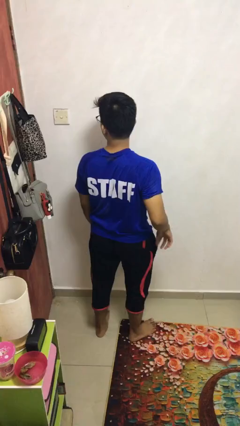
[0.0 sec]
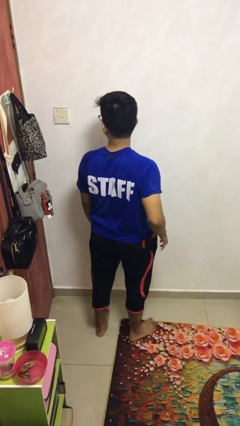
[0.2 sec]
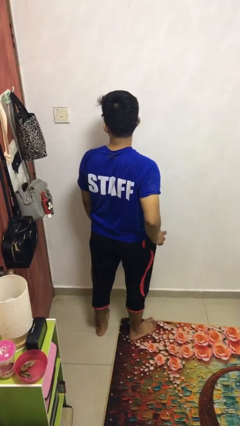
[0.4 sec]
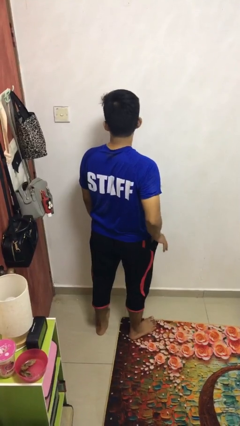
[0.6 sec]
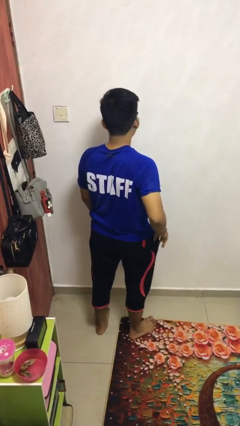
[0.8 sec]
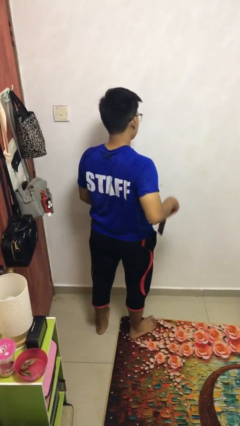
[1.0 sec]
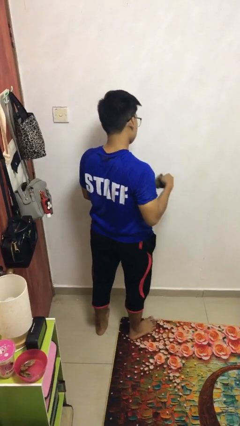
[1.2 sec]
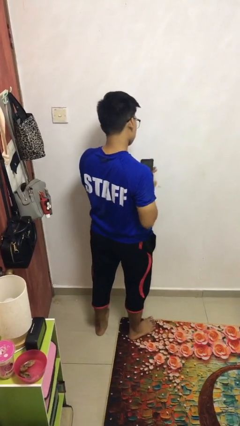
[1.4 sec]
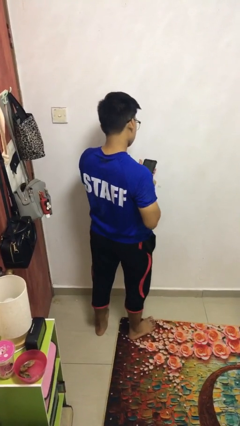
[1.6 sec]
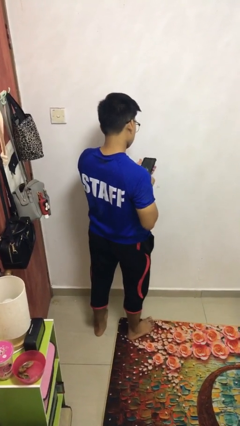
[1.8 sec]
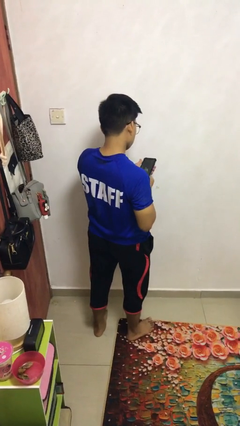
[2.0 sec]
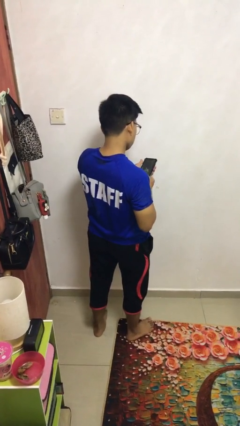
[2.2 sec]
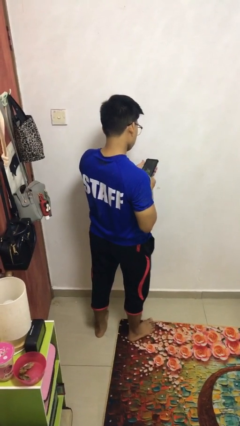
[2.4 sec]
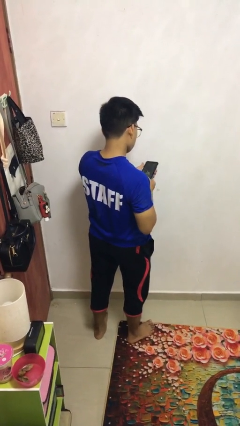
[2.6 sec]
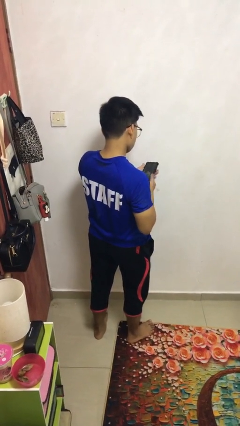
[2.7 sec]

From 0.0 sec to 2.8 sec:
person takes phone from pocket

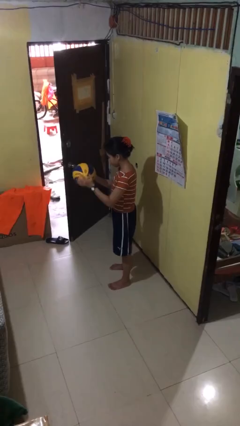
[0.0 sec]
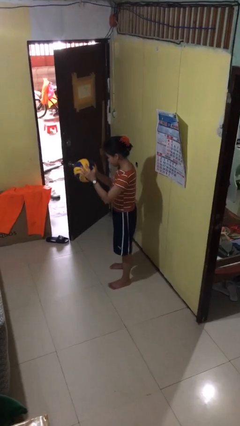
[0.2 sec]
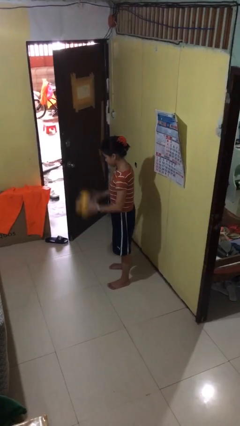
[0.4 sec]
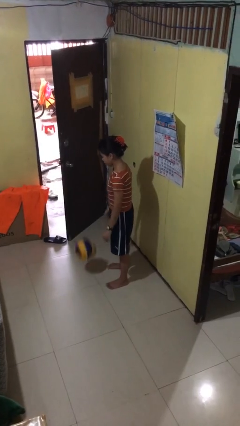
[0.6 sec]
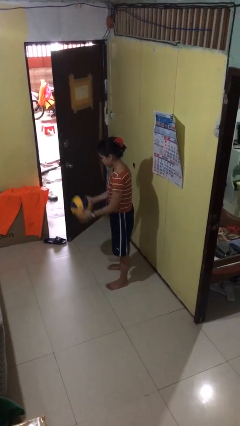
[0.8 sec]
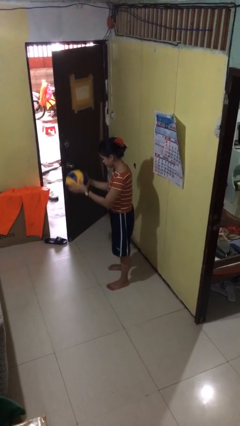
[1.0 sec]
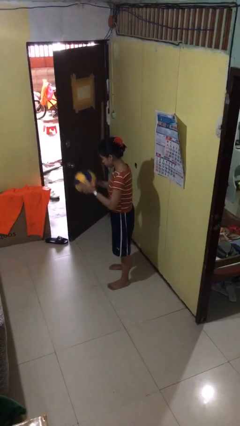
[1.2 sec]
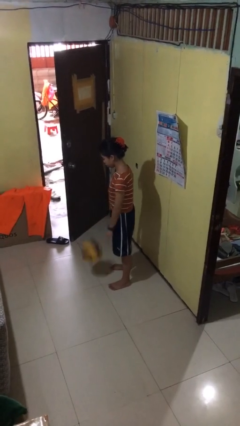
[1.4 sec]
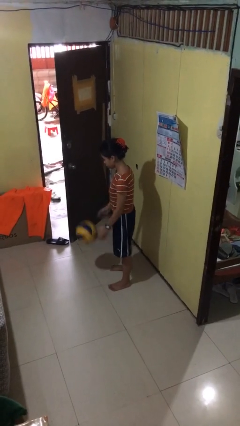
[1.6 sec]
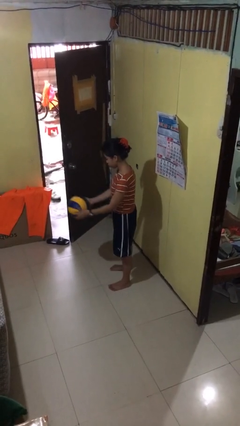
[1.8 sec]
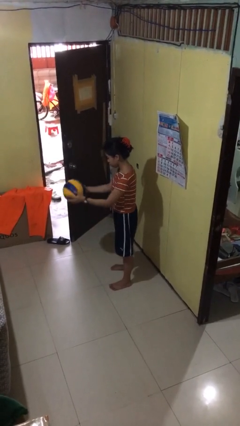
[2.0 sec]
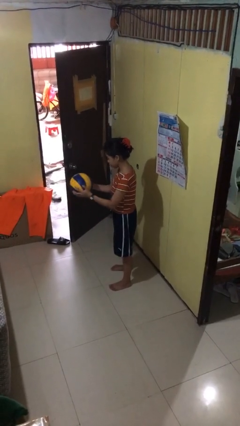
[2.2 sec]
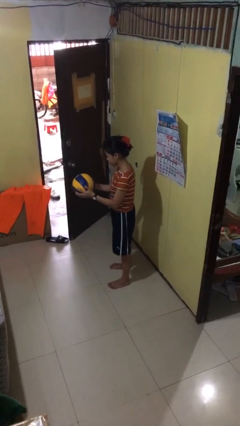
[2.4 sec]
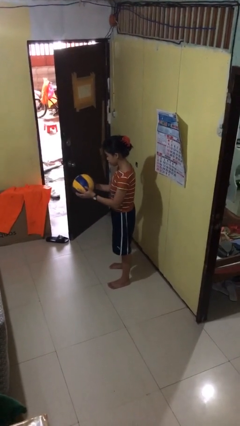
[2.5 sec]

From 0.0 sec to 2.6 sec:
person bounces ball on floor

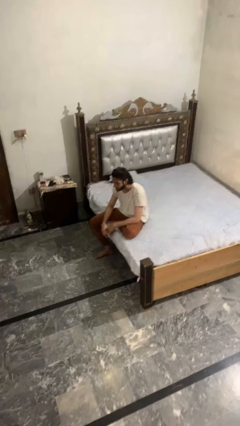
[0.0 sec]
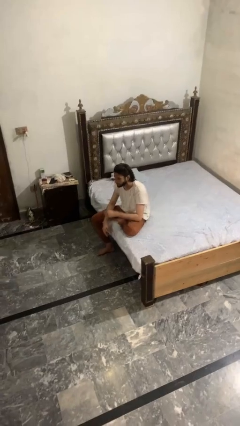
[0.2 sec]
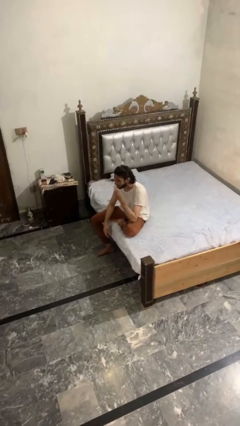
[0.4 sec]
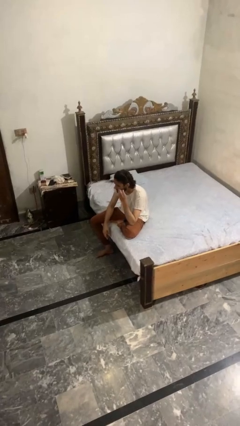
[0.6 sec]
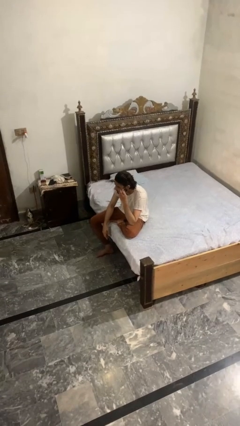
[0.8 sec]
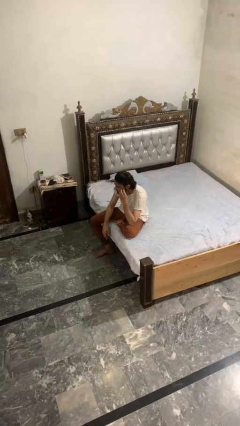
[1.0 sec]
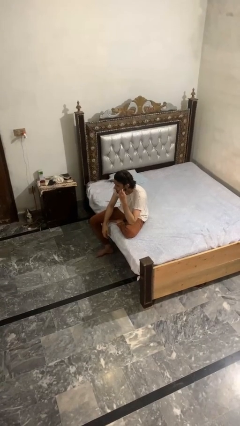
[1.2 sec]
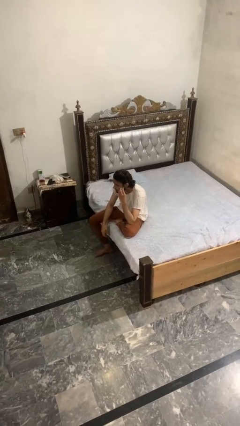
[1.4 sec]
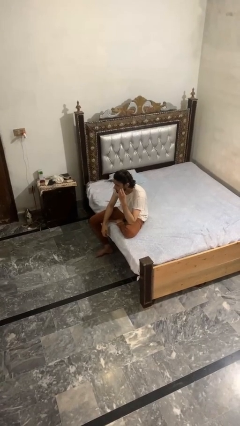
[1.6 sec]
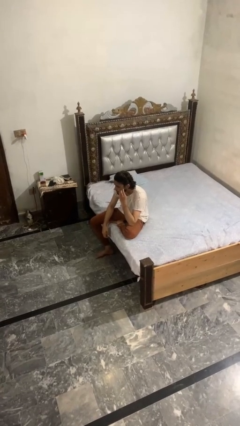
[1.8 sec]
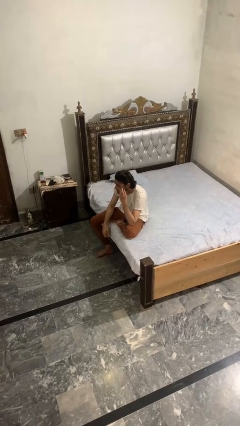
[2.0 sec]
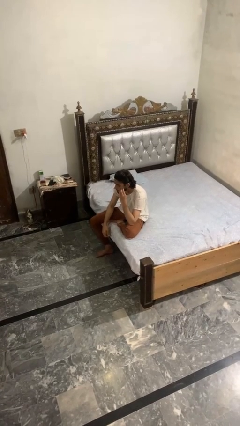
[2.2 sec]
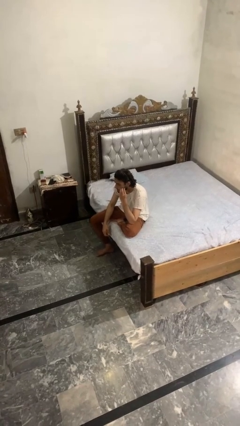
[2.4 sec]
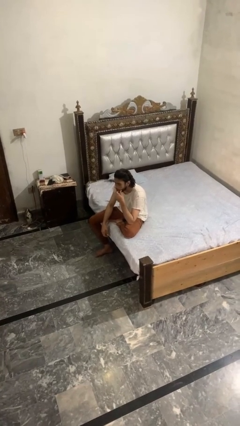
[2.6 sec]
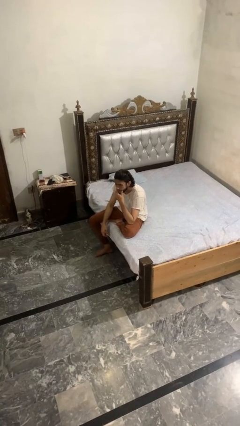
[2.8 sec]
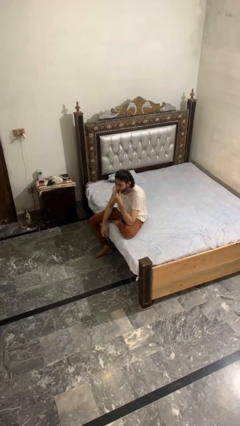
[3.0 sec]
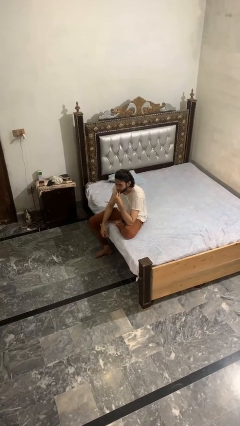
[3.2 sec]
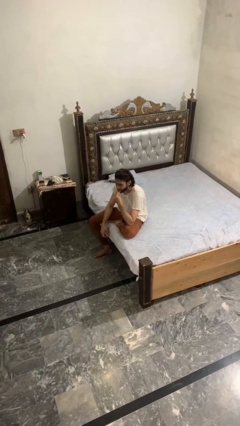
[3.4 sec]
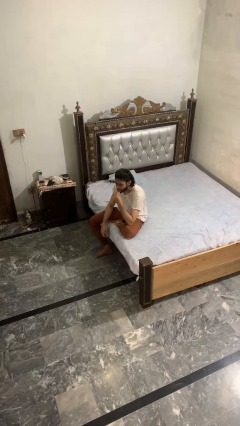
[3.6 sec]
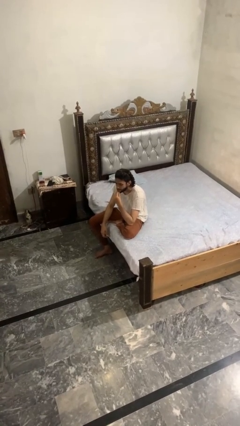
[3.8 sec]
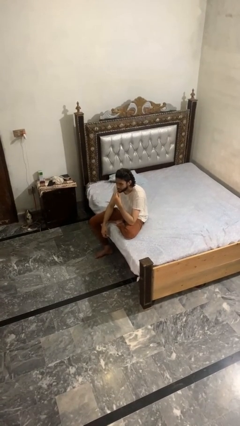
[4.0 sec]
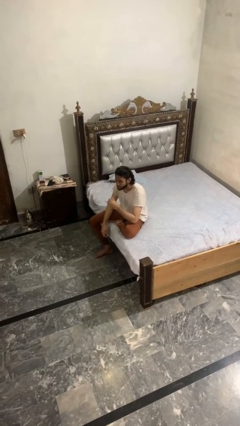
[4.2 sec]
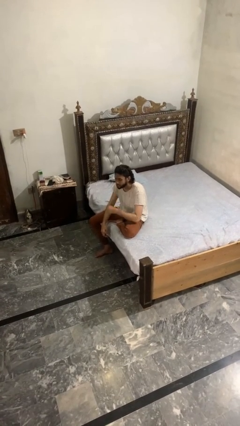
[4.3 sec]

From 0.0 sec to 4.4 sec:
person scratches face

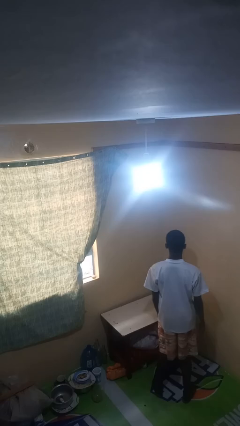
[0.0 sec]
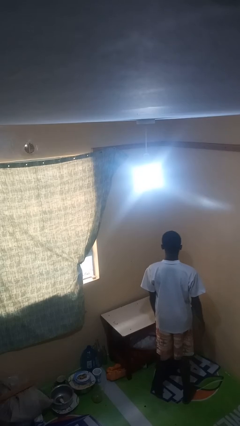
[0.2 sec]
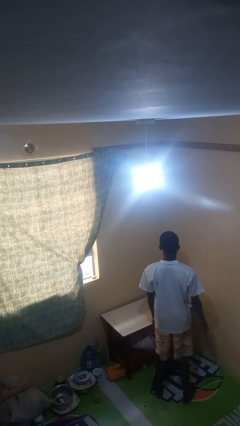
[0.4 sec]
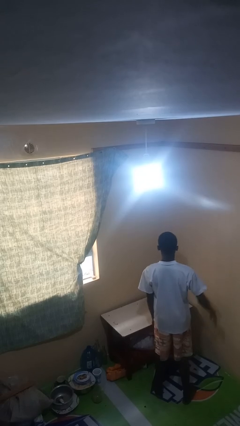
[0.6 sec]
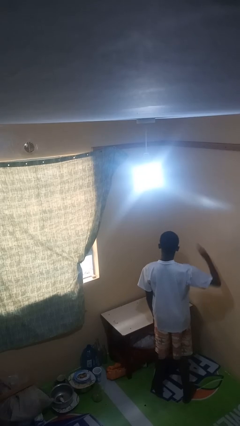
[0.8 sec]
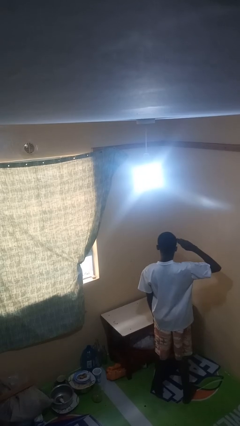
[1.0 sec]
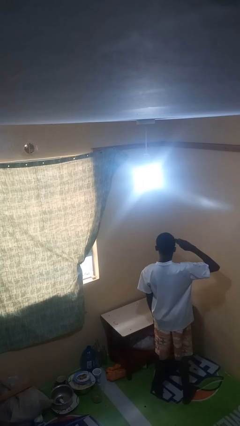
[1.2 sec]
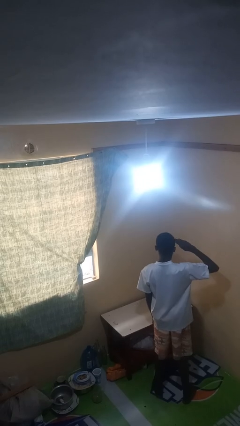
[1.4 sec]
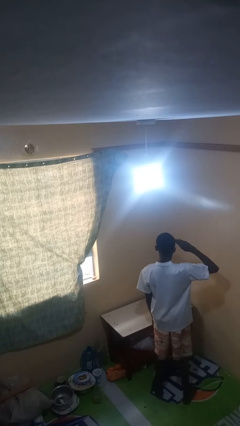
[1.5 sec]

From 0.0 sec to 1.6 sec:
person salutes

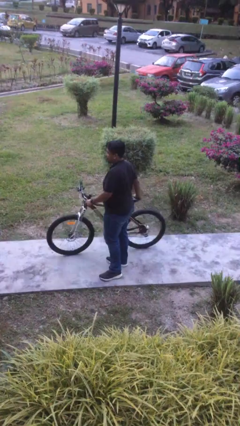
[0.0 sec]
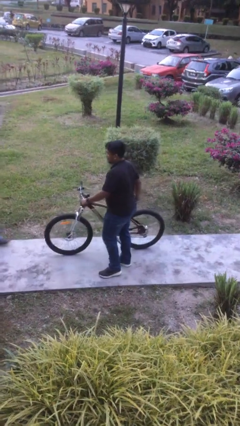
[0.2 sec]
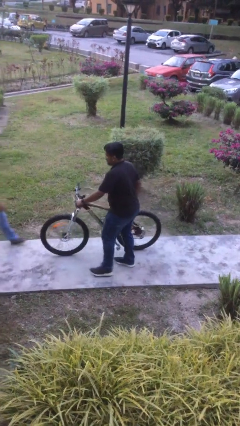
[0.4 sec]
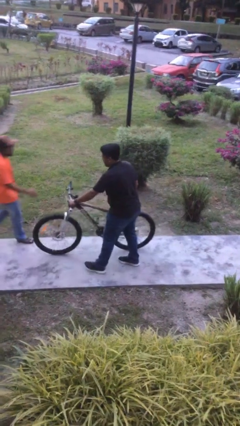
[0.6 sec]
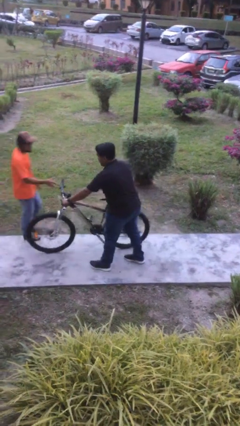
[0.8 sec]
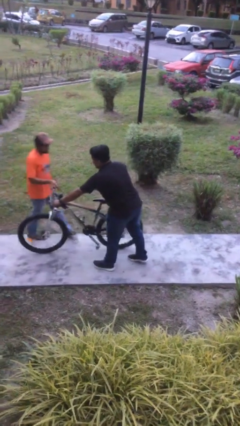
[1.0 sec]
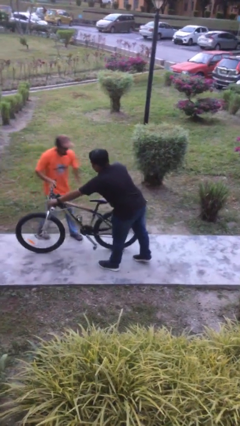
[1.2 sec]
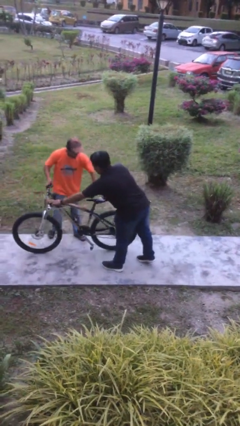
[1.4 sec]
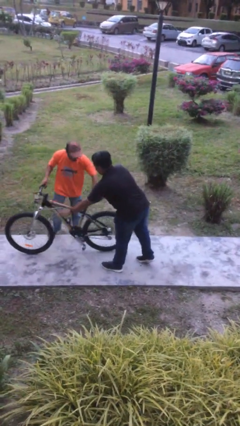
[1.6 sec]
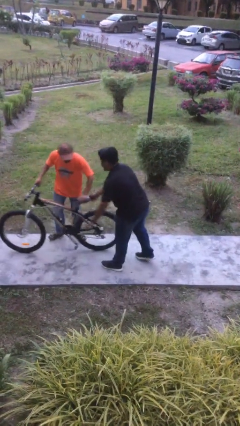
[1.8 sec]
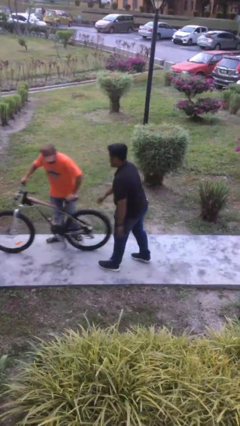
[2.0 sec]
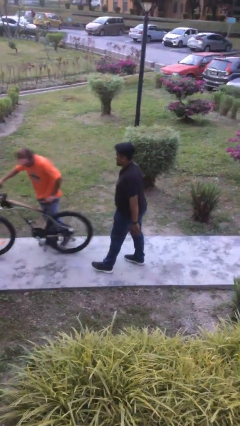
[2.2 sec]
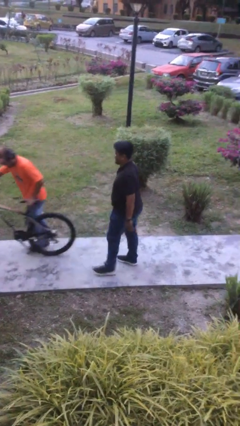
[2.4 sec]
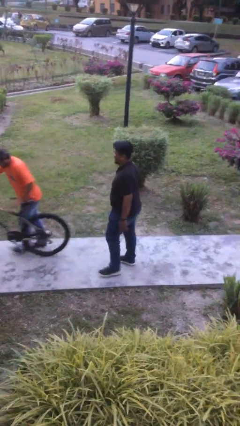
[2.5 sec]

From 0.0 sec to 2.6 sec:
person transfers object to person

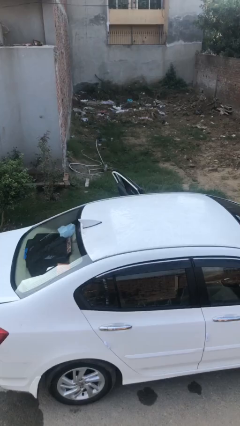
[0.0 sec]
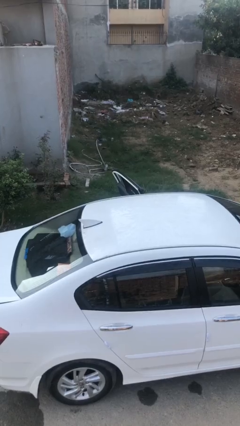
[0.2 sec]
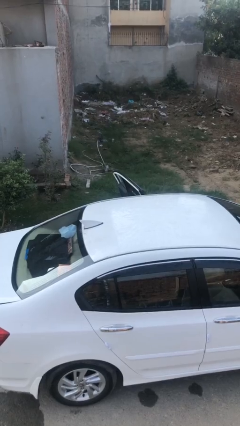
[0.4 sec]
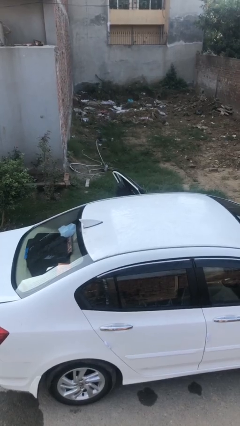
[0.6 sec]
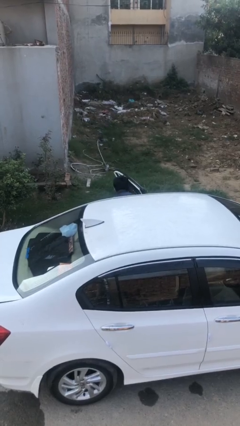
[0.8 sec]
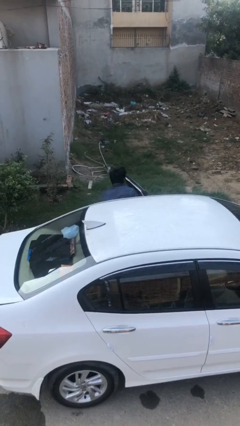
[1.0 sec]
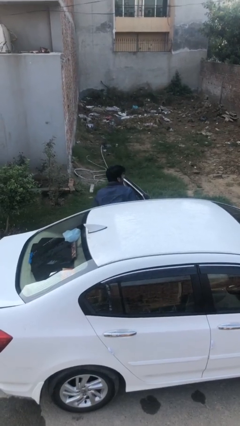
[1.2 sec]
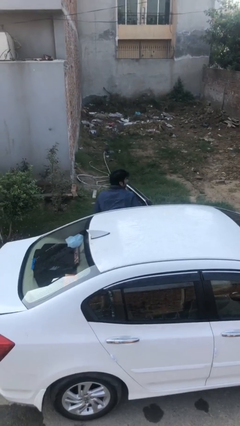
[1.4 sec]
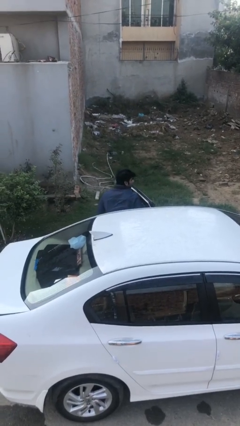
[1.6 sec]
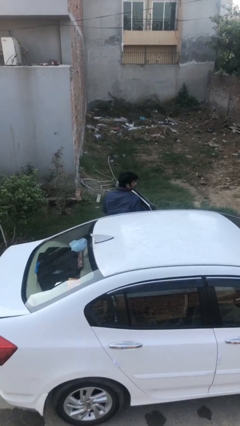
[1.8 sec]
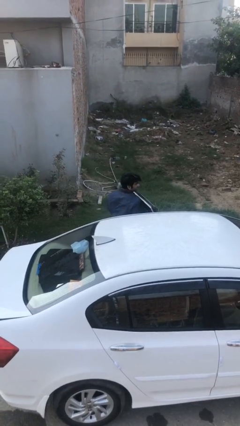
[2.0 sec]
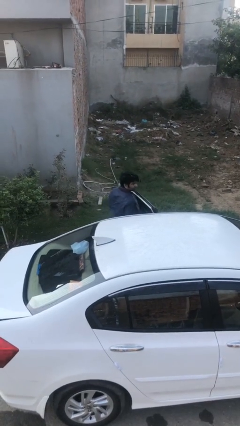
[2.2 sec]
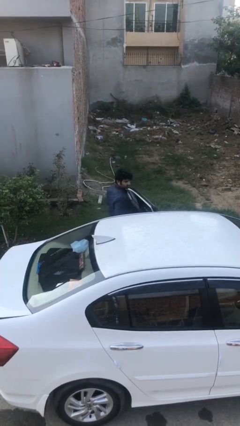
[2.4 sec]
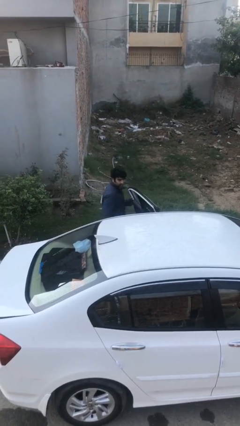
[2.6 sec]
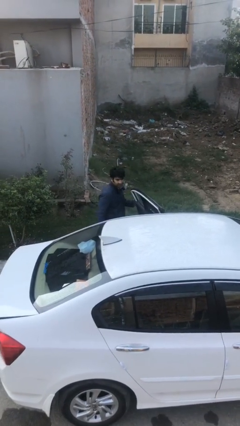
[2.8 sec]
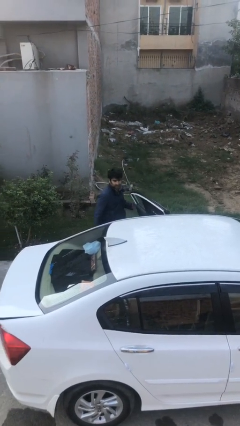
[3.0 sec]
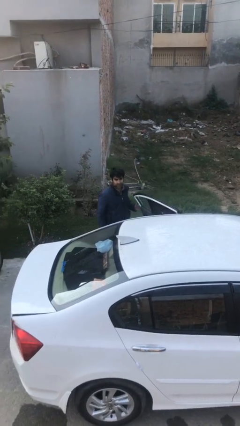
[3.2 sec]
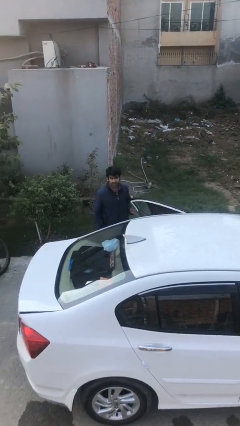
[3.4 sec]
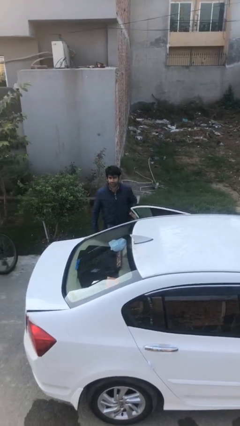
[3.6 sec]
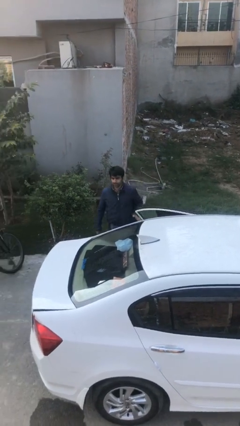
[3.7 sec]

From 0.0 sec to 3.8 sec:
person exits car
